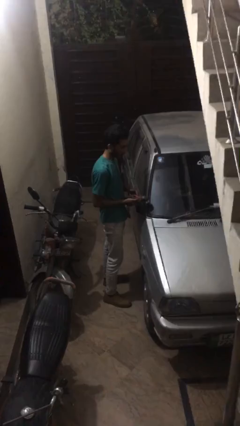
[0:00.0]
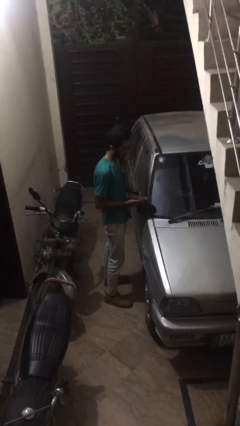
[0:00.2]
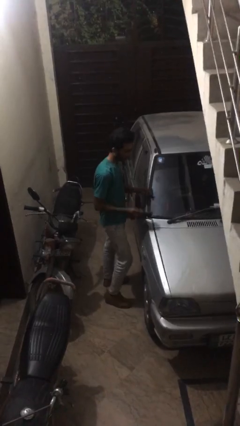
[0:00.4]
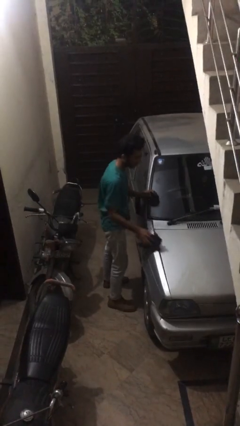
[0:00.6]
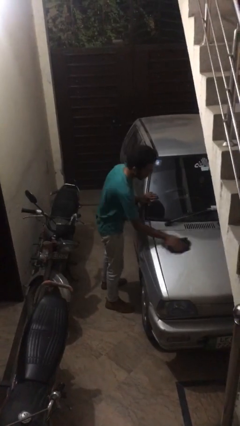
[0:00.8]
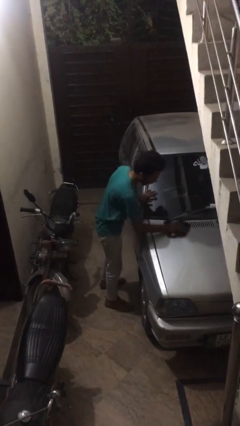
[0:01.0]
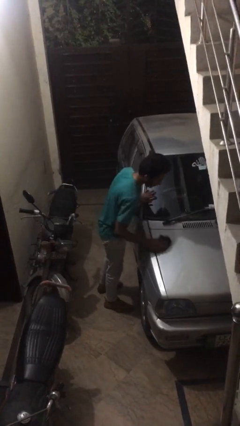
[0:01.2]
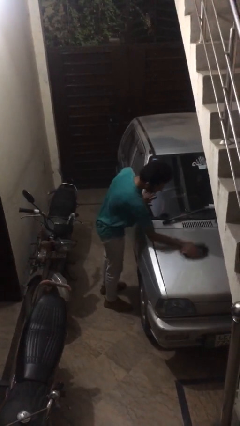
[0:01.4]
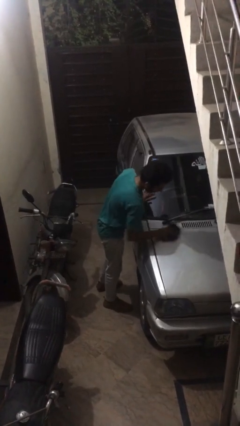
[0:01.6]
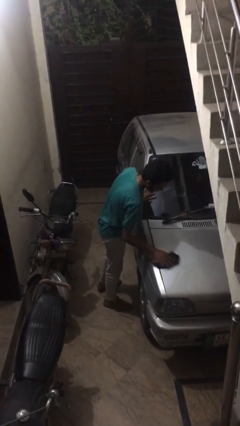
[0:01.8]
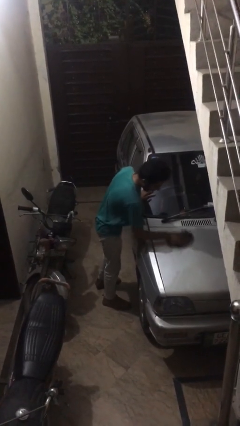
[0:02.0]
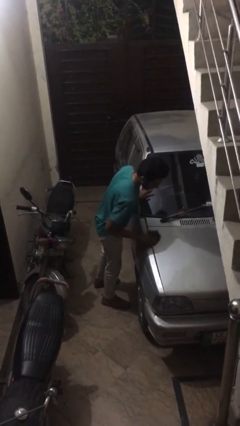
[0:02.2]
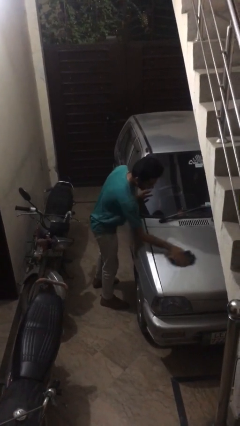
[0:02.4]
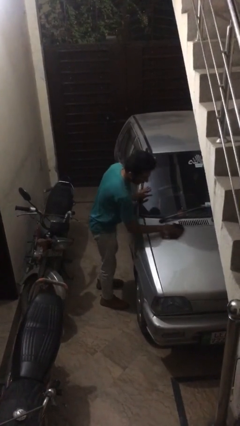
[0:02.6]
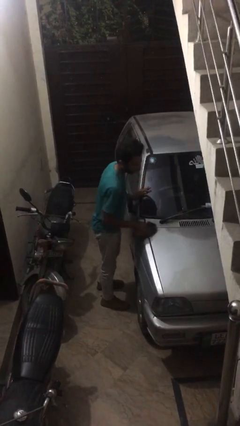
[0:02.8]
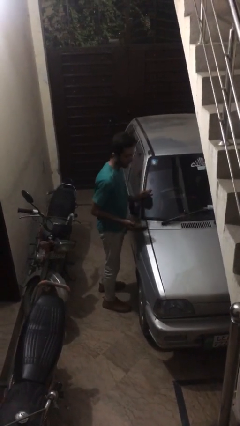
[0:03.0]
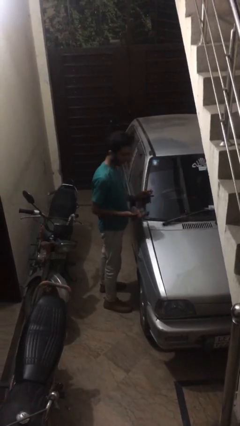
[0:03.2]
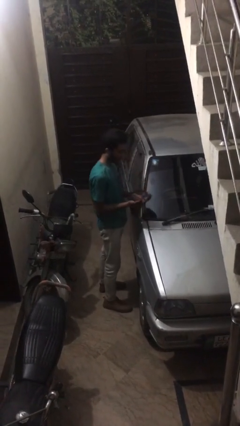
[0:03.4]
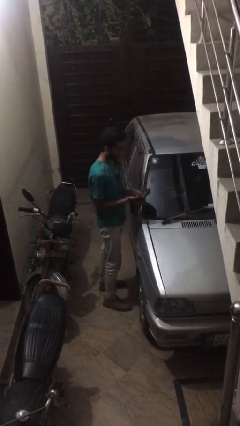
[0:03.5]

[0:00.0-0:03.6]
person polishes car with rag

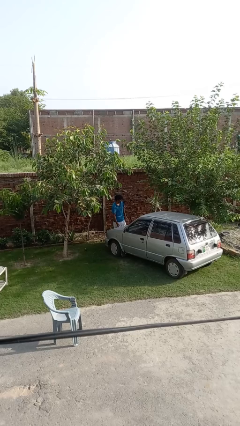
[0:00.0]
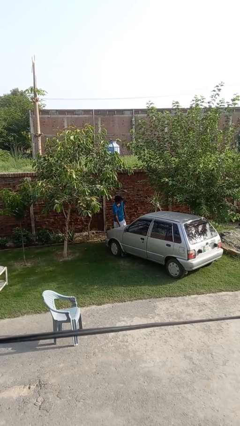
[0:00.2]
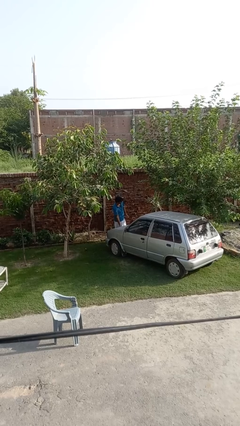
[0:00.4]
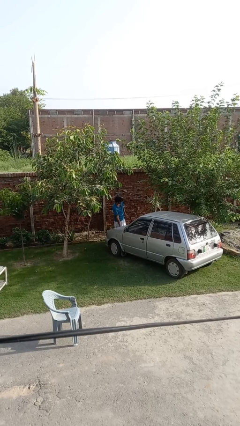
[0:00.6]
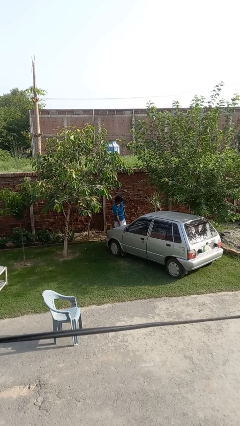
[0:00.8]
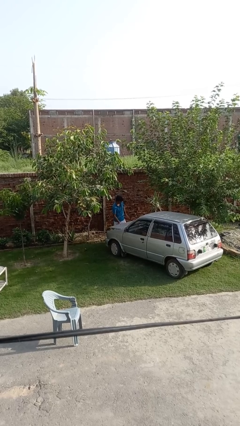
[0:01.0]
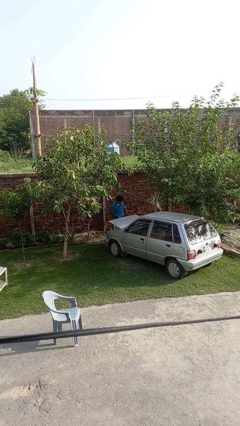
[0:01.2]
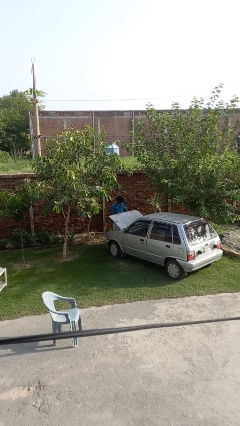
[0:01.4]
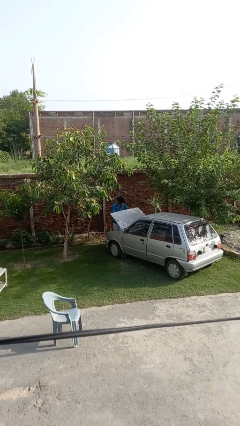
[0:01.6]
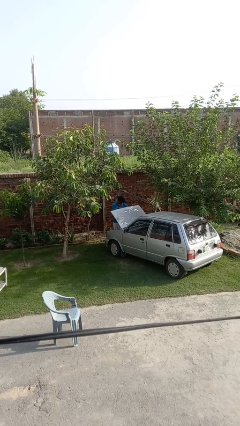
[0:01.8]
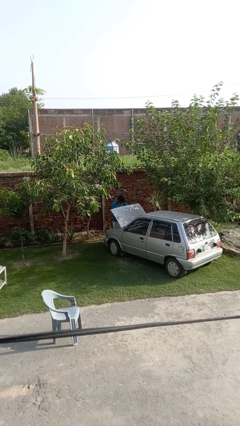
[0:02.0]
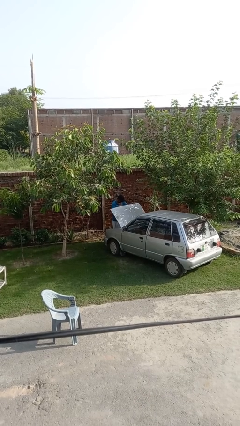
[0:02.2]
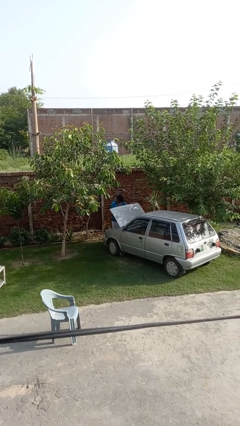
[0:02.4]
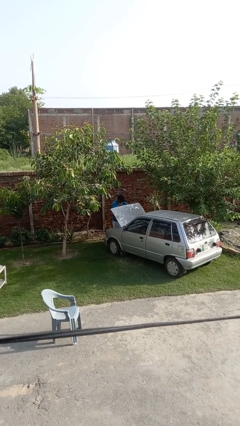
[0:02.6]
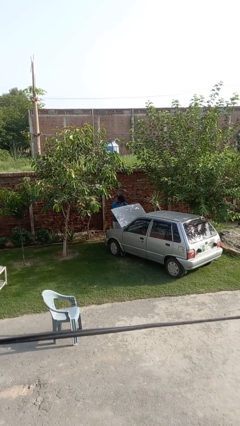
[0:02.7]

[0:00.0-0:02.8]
person opens car hood

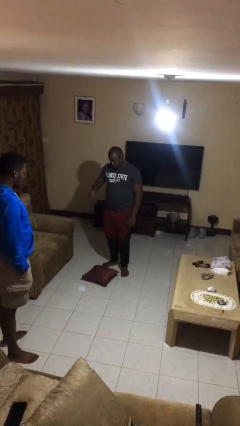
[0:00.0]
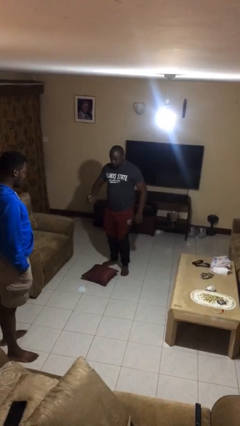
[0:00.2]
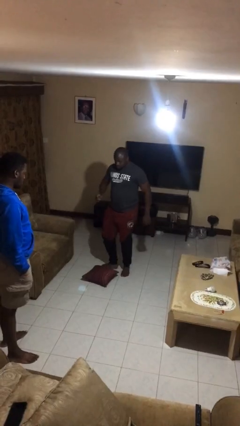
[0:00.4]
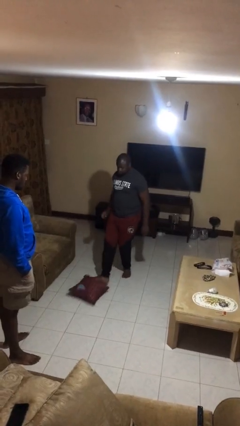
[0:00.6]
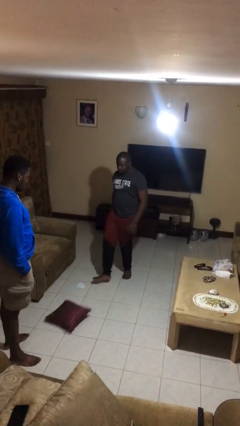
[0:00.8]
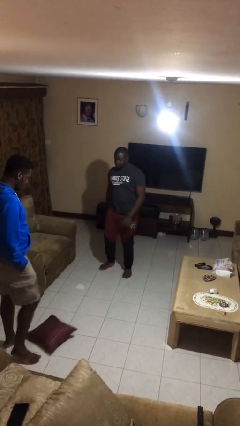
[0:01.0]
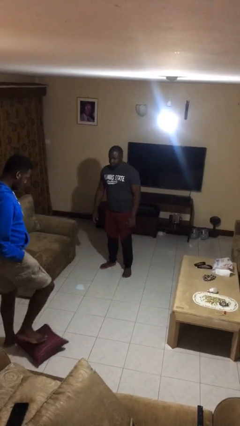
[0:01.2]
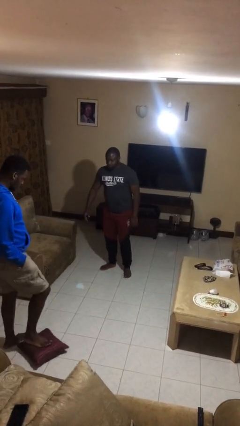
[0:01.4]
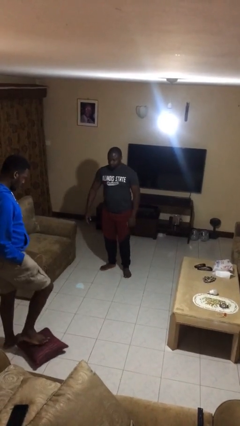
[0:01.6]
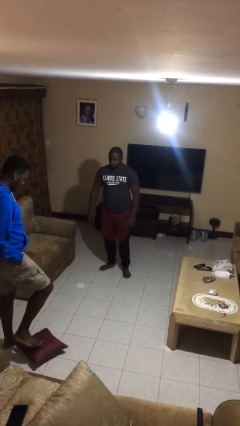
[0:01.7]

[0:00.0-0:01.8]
person kicks object to person

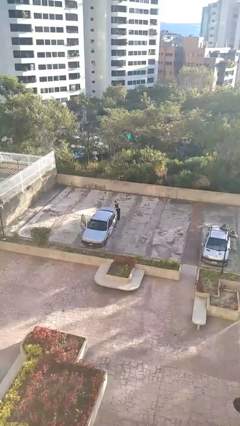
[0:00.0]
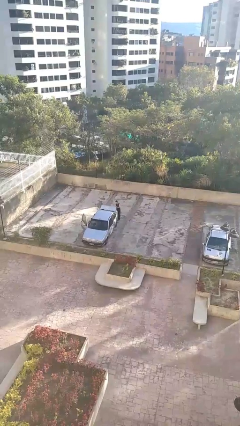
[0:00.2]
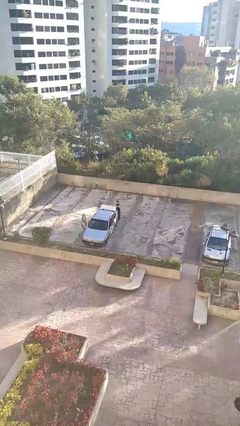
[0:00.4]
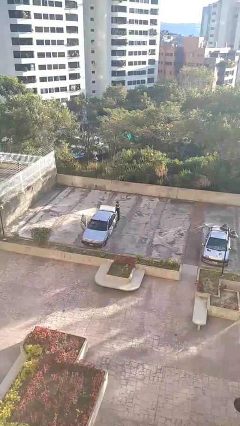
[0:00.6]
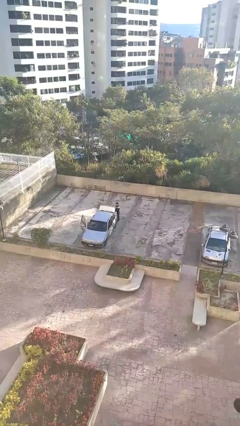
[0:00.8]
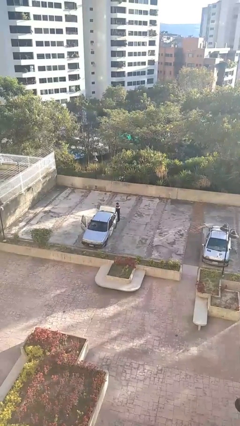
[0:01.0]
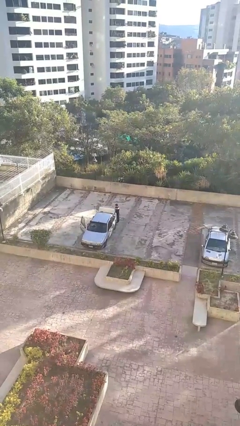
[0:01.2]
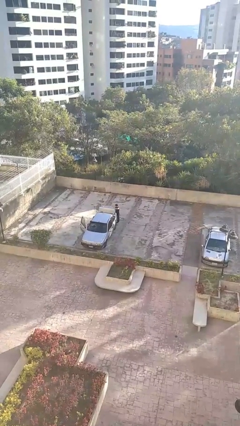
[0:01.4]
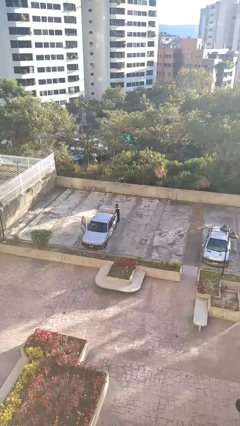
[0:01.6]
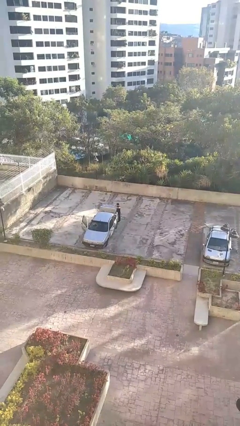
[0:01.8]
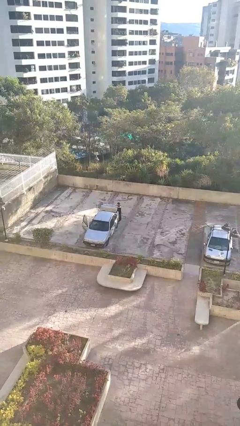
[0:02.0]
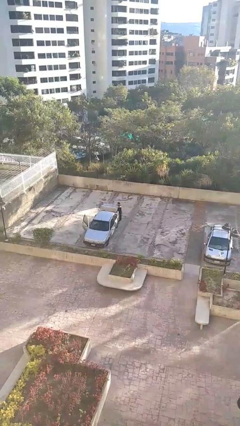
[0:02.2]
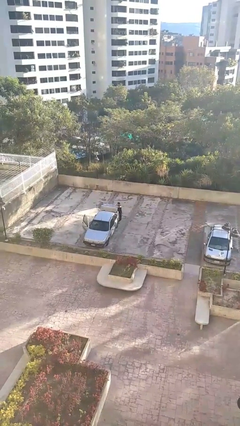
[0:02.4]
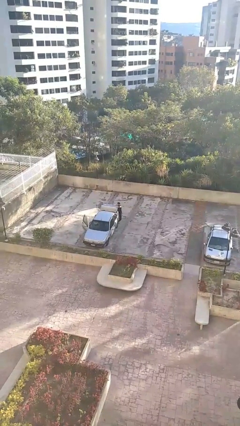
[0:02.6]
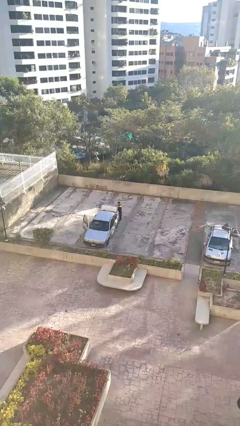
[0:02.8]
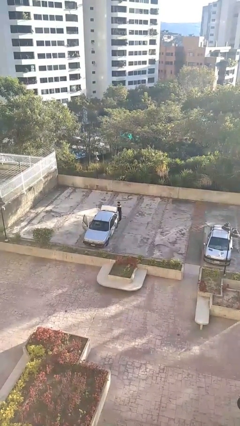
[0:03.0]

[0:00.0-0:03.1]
person opens car trunk

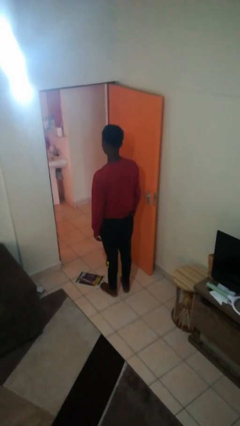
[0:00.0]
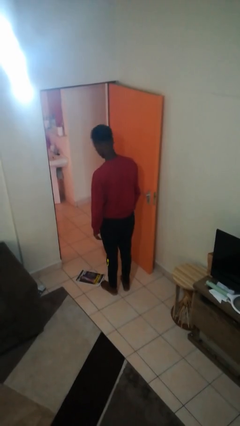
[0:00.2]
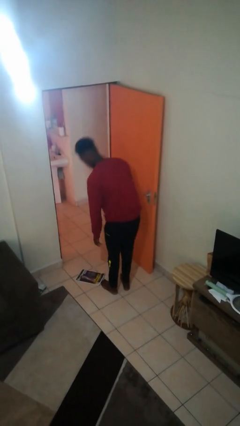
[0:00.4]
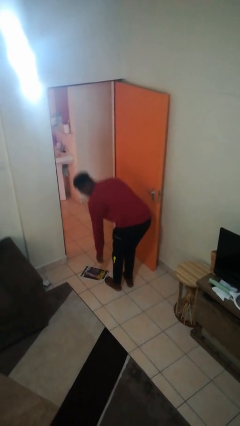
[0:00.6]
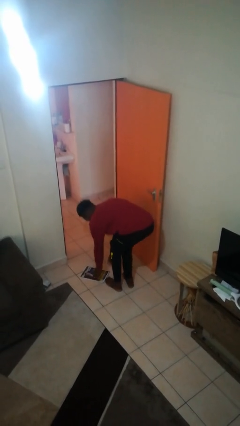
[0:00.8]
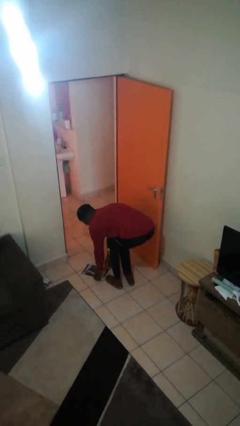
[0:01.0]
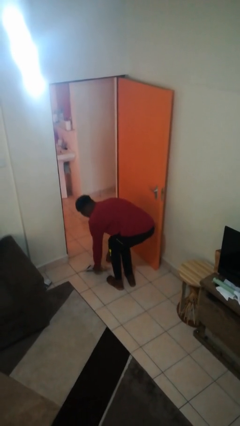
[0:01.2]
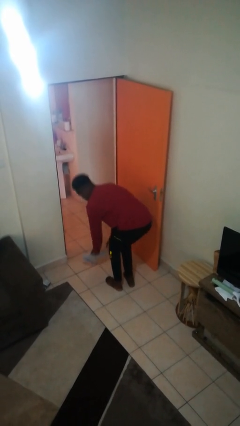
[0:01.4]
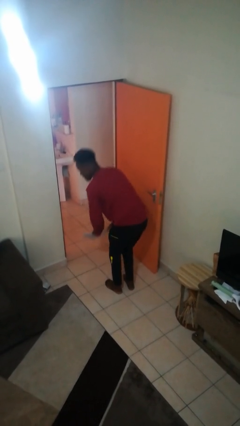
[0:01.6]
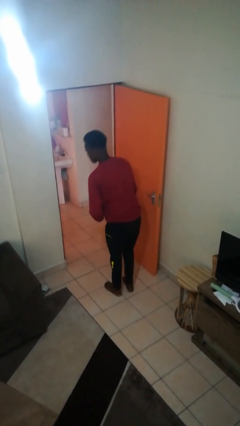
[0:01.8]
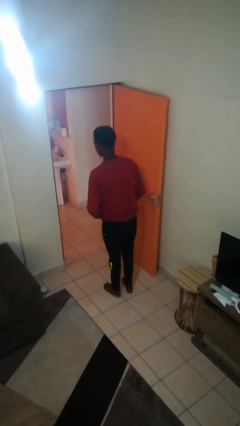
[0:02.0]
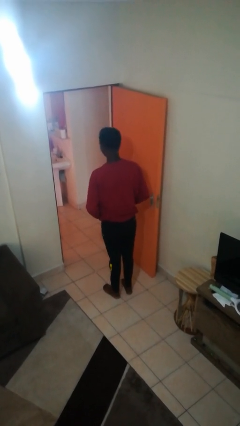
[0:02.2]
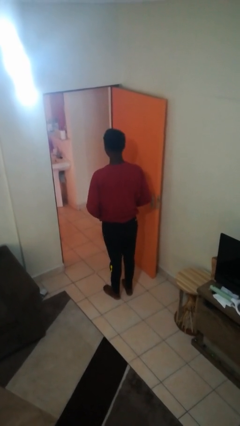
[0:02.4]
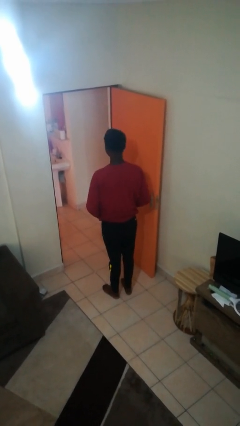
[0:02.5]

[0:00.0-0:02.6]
person picks up object from floor

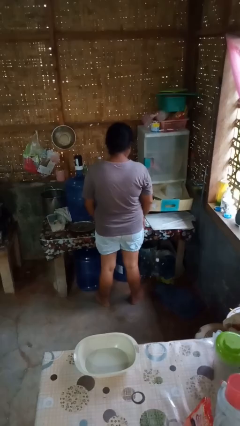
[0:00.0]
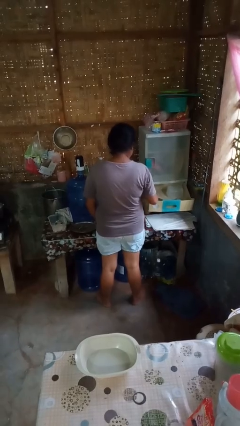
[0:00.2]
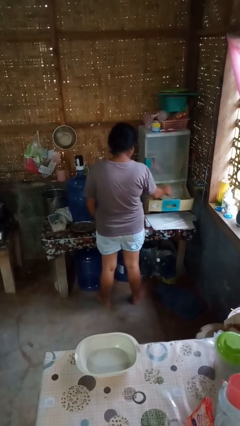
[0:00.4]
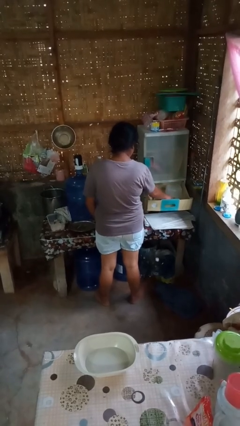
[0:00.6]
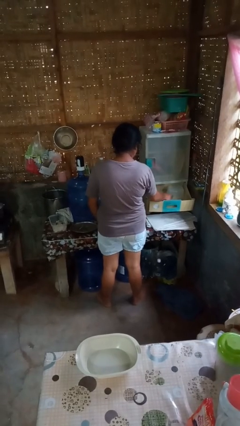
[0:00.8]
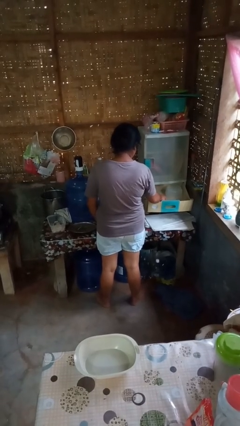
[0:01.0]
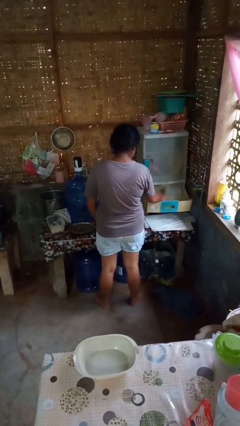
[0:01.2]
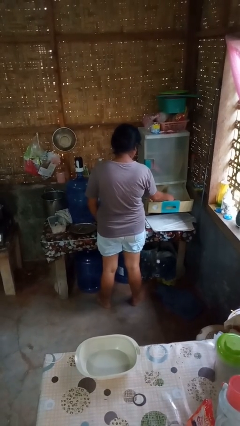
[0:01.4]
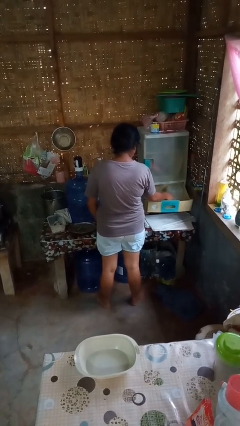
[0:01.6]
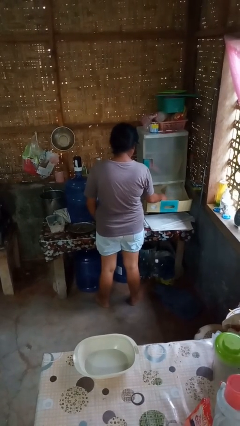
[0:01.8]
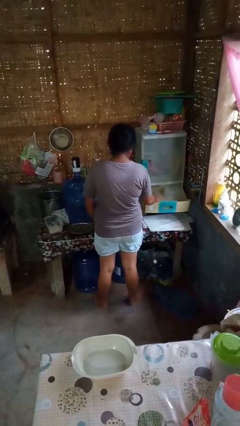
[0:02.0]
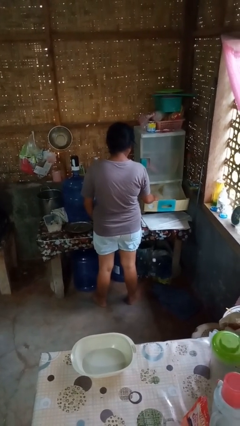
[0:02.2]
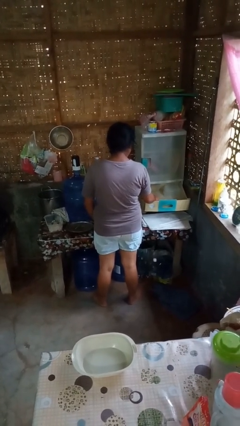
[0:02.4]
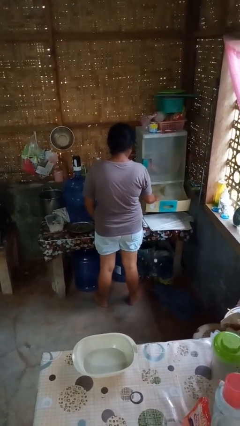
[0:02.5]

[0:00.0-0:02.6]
person searches in kitchen drawer

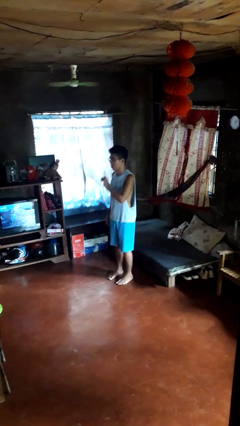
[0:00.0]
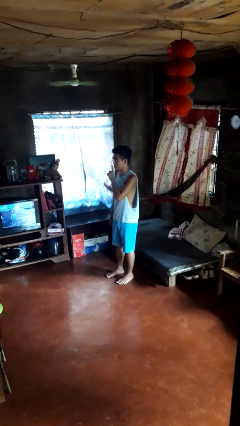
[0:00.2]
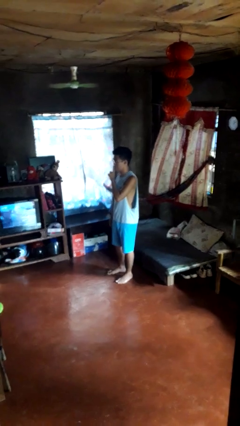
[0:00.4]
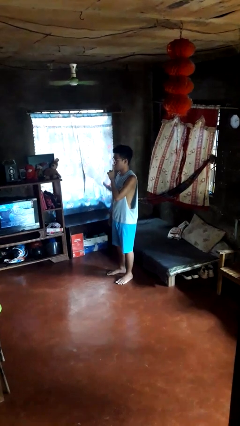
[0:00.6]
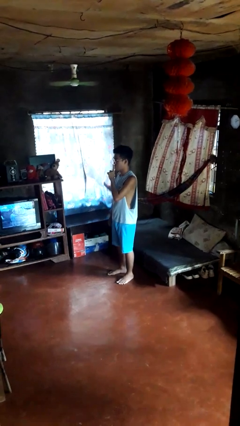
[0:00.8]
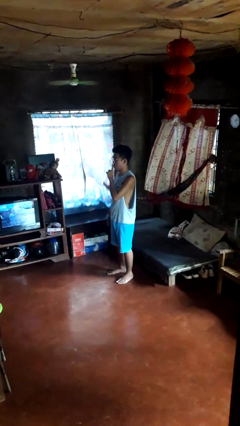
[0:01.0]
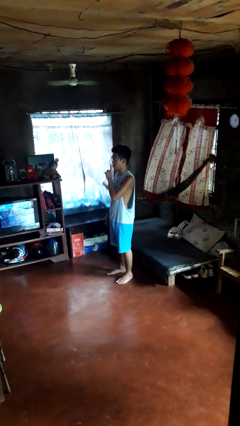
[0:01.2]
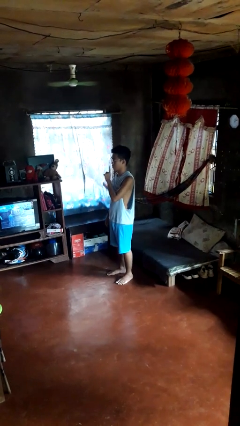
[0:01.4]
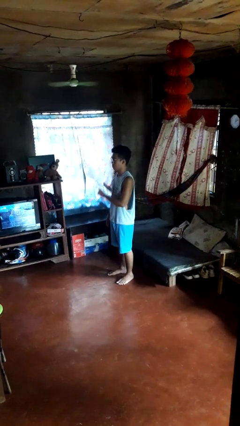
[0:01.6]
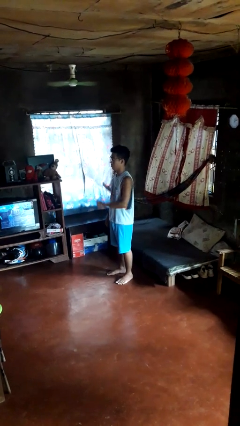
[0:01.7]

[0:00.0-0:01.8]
person gestures be quiet
